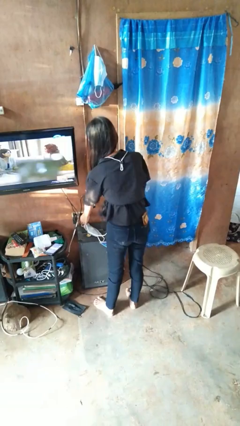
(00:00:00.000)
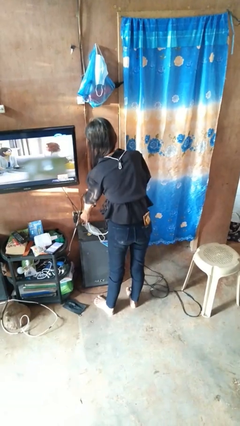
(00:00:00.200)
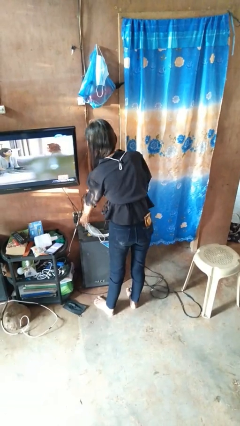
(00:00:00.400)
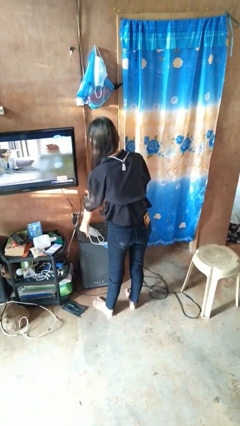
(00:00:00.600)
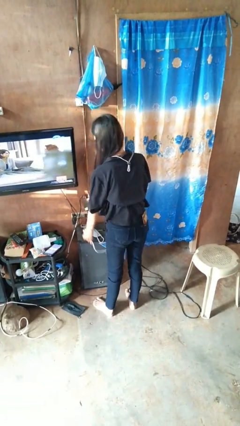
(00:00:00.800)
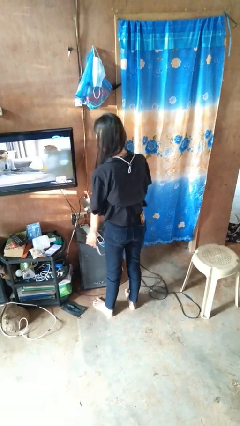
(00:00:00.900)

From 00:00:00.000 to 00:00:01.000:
person unplugs from electrical socket

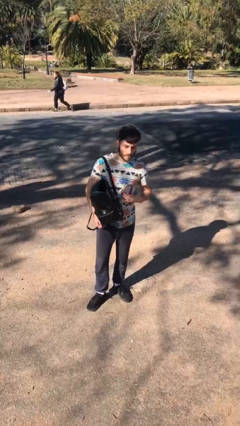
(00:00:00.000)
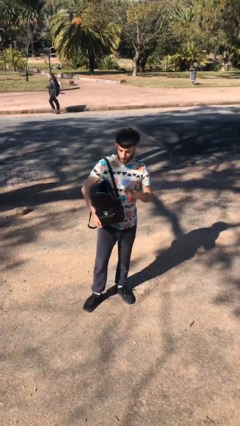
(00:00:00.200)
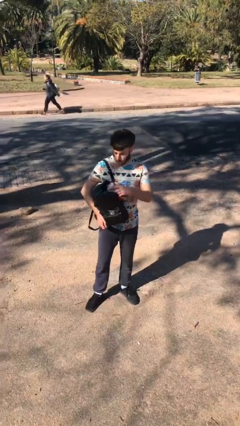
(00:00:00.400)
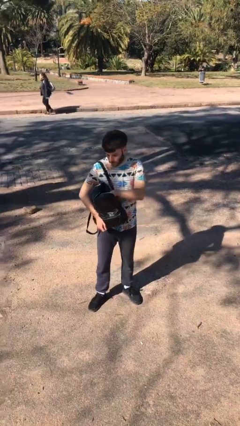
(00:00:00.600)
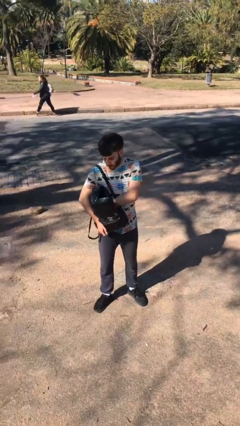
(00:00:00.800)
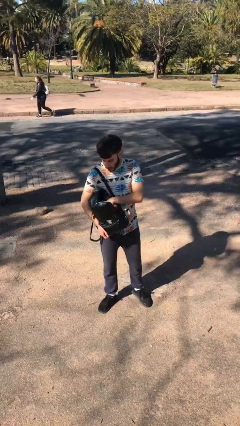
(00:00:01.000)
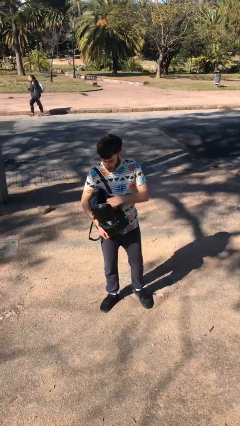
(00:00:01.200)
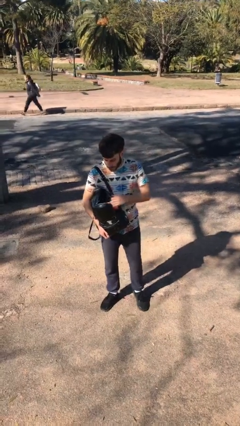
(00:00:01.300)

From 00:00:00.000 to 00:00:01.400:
person puts object into backpack

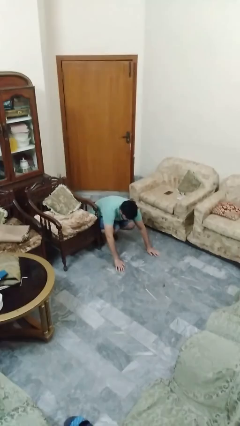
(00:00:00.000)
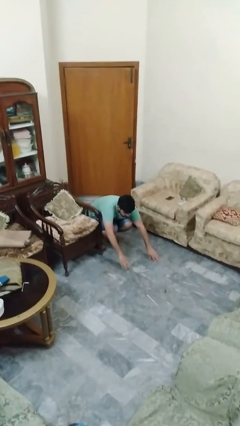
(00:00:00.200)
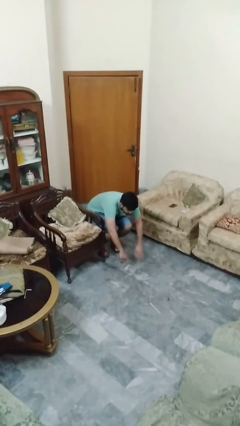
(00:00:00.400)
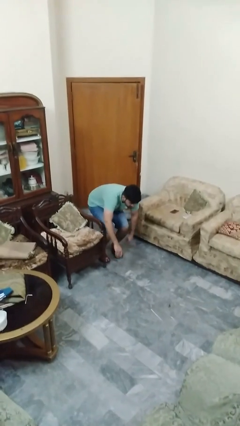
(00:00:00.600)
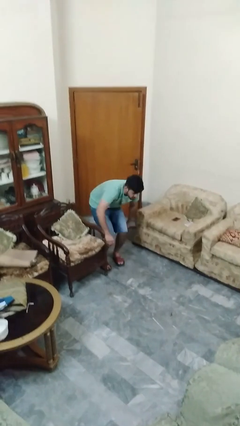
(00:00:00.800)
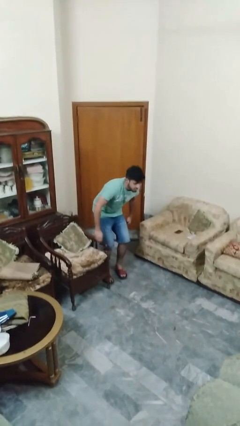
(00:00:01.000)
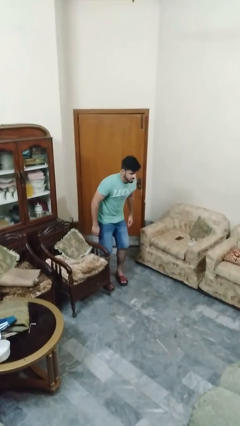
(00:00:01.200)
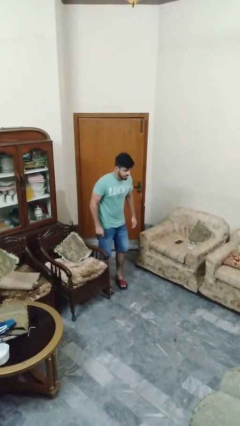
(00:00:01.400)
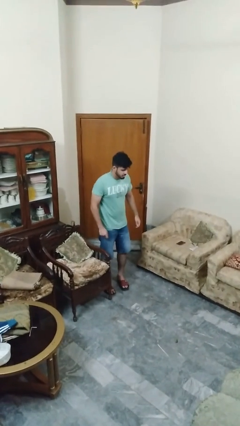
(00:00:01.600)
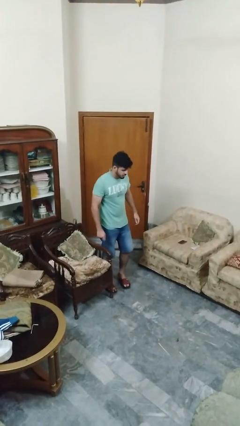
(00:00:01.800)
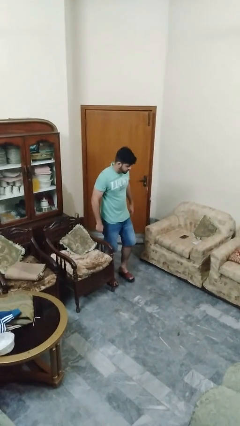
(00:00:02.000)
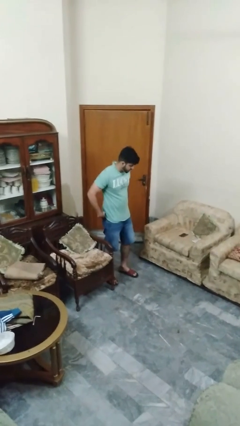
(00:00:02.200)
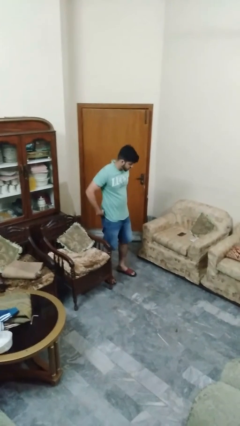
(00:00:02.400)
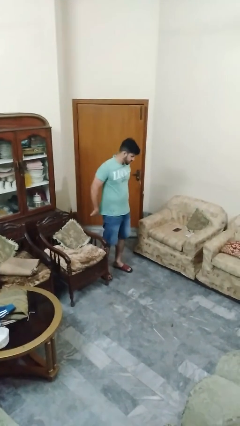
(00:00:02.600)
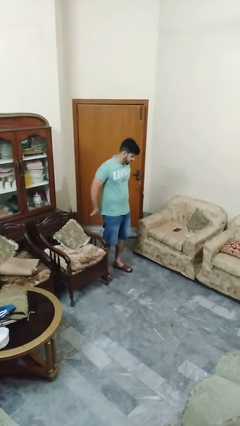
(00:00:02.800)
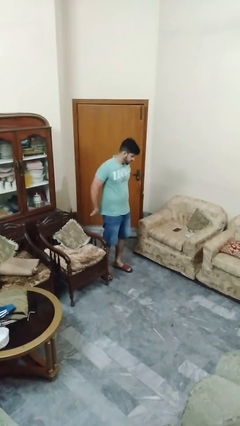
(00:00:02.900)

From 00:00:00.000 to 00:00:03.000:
person stands up from floor

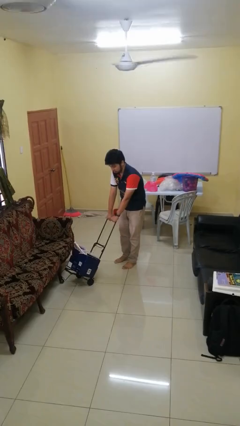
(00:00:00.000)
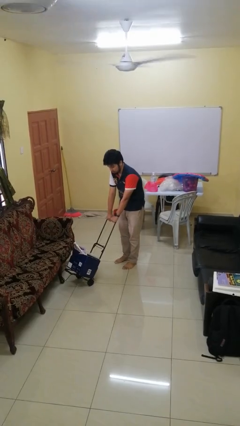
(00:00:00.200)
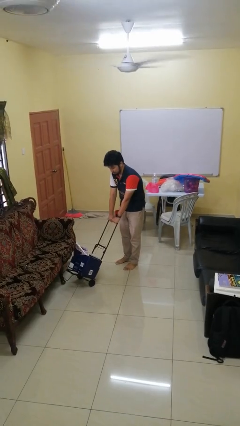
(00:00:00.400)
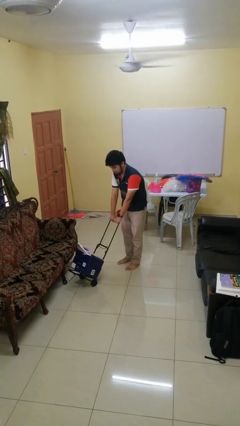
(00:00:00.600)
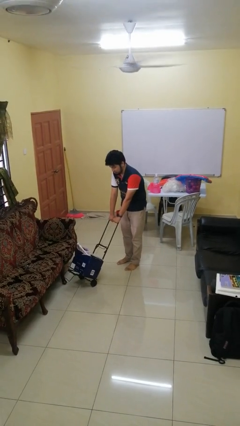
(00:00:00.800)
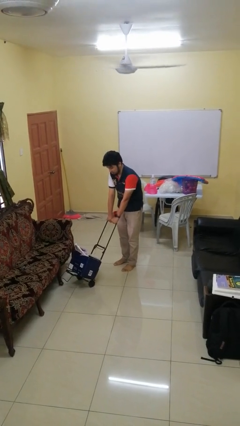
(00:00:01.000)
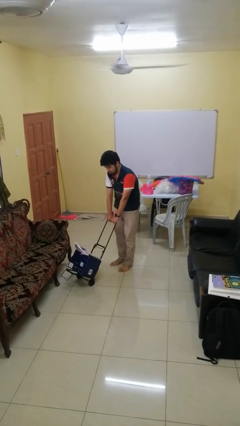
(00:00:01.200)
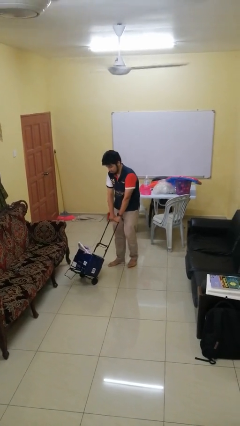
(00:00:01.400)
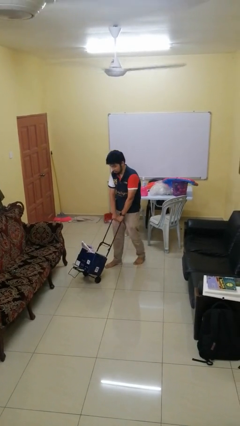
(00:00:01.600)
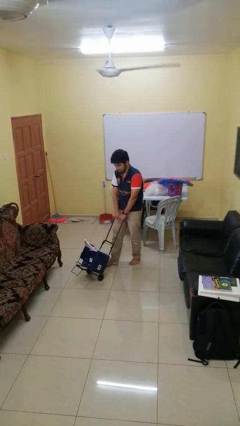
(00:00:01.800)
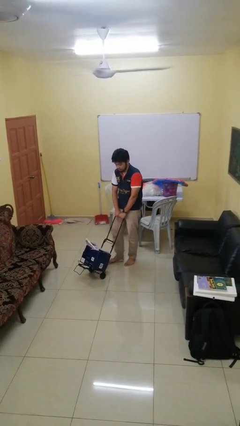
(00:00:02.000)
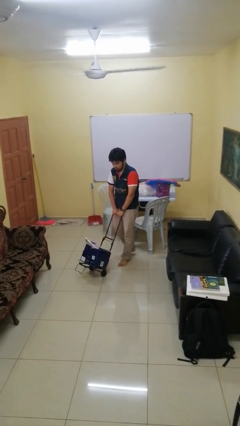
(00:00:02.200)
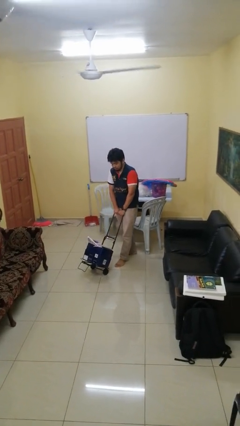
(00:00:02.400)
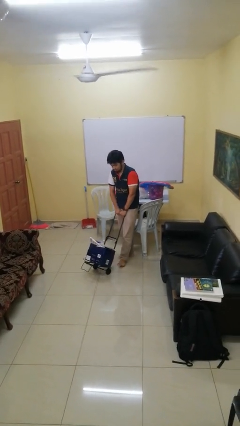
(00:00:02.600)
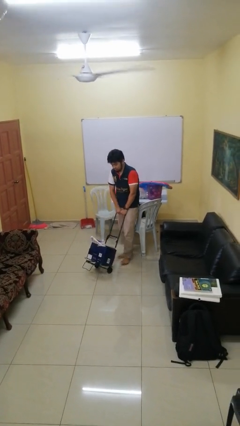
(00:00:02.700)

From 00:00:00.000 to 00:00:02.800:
person pulls wheeled cart

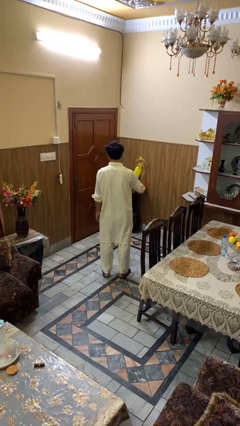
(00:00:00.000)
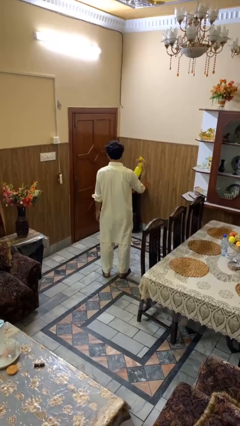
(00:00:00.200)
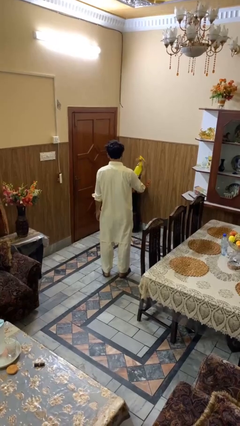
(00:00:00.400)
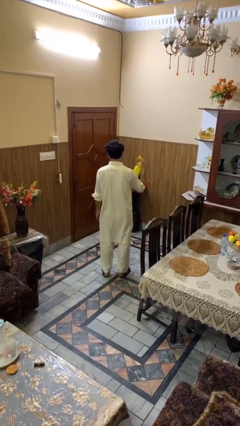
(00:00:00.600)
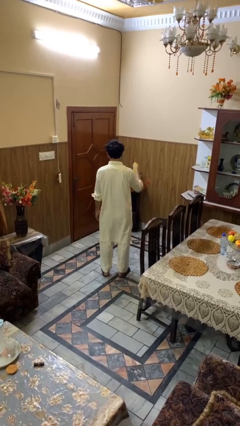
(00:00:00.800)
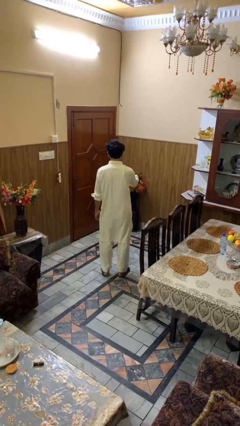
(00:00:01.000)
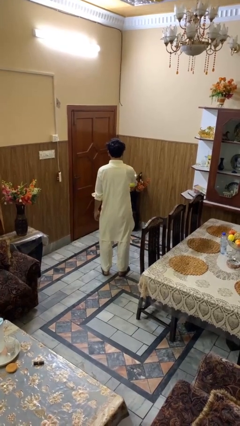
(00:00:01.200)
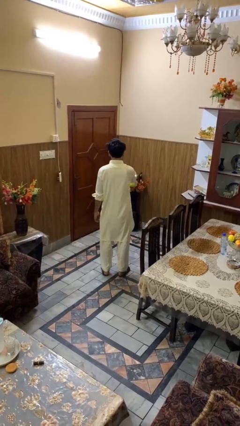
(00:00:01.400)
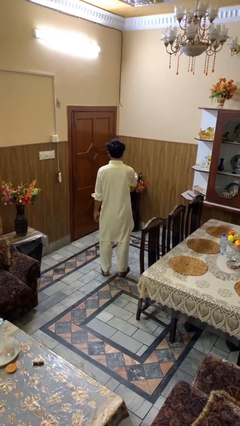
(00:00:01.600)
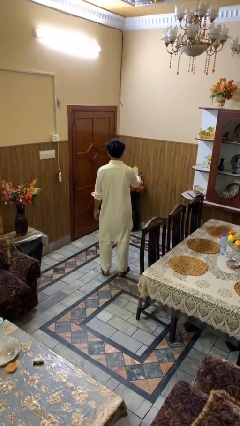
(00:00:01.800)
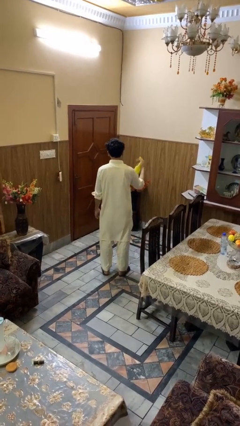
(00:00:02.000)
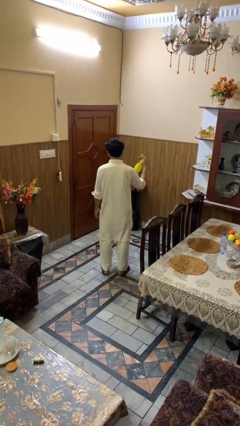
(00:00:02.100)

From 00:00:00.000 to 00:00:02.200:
person sprays from bottle

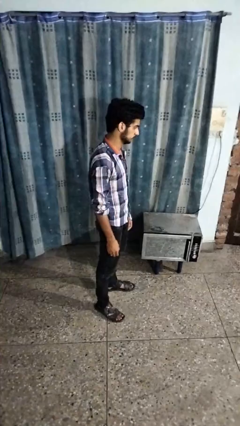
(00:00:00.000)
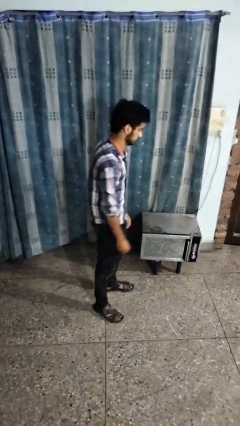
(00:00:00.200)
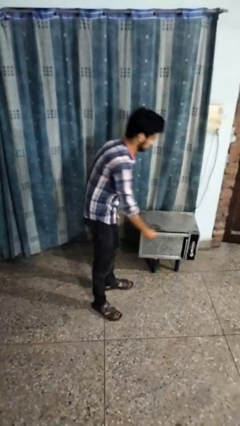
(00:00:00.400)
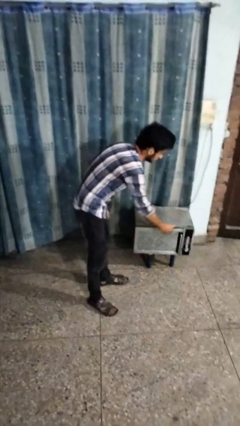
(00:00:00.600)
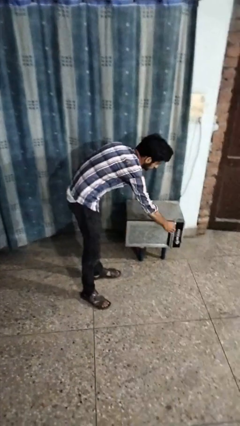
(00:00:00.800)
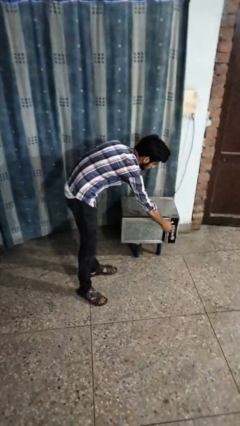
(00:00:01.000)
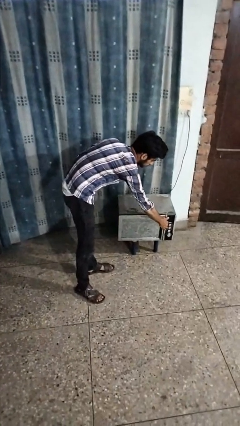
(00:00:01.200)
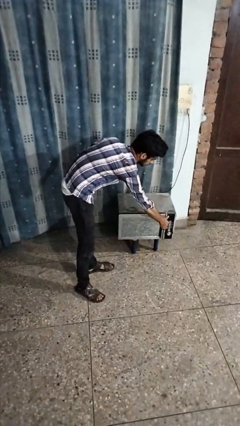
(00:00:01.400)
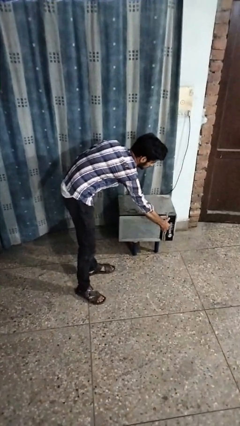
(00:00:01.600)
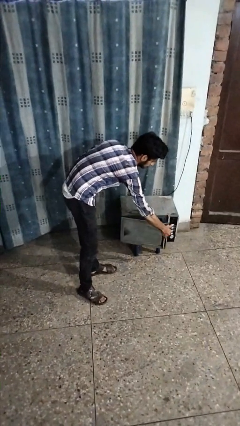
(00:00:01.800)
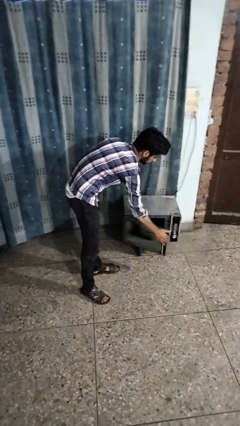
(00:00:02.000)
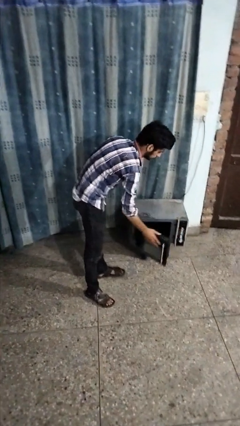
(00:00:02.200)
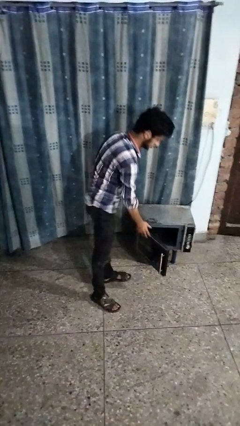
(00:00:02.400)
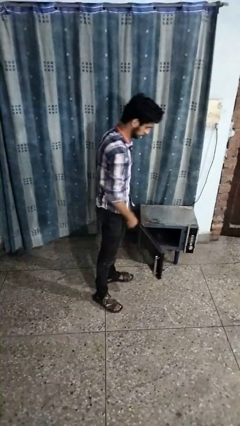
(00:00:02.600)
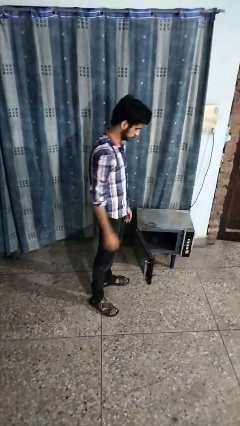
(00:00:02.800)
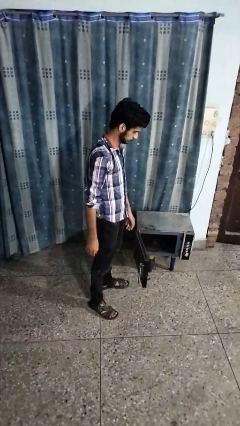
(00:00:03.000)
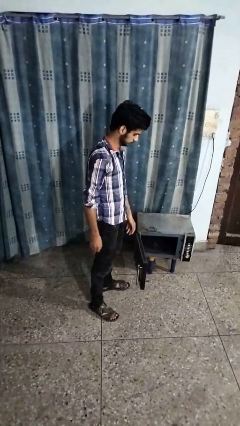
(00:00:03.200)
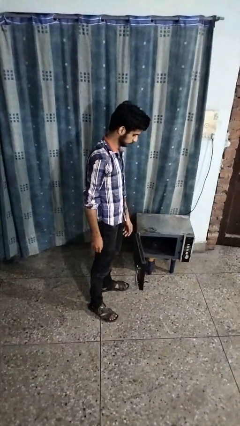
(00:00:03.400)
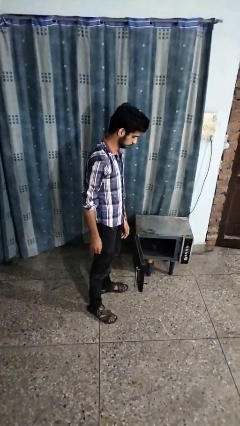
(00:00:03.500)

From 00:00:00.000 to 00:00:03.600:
person opens oven door

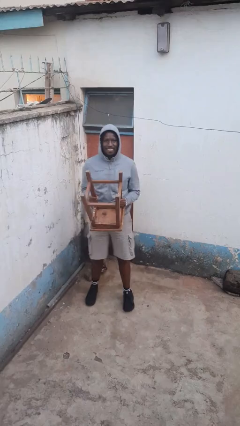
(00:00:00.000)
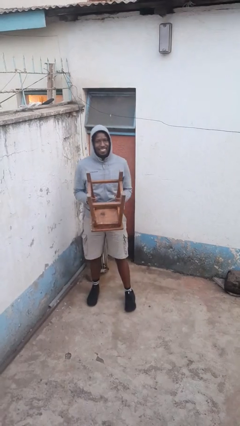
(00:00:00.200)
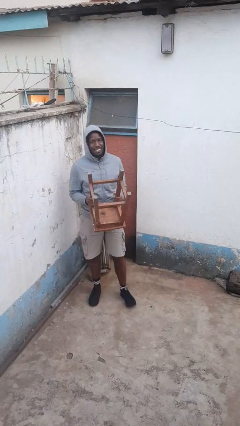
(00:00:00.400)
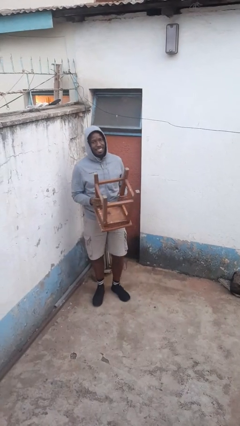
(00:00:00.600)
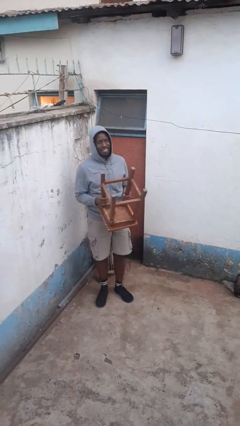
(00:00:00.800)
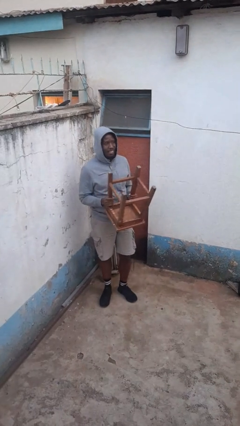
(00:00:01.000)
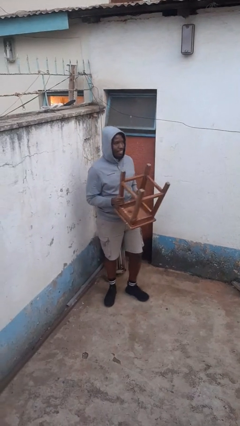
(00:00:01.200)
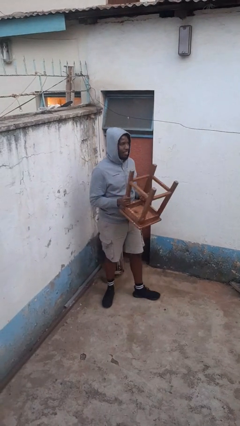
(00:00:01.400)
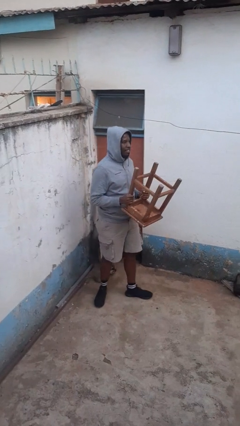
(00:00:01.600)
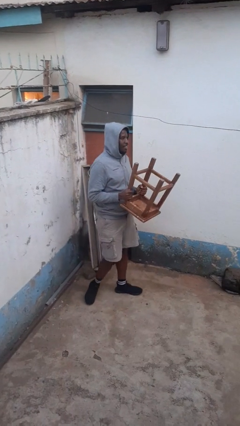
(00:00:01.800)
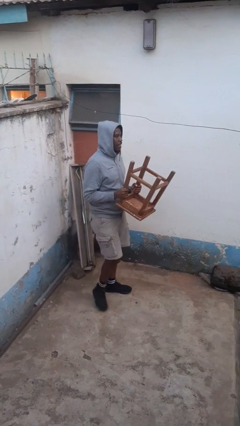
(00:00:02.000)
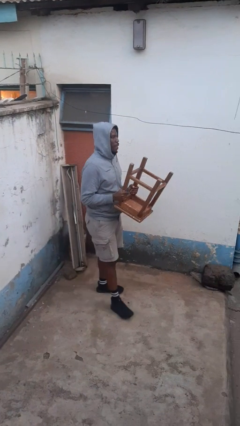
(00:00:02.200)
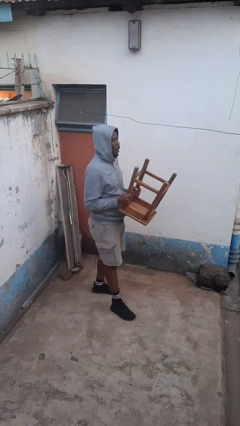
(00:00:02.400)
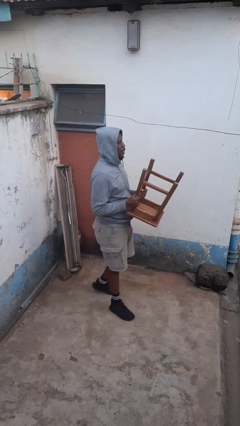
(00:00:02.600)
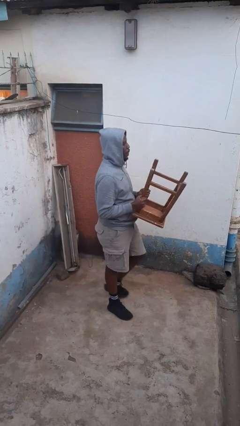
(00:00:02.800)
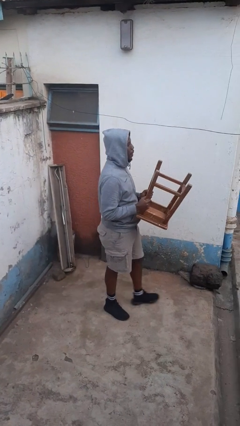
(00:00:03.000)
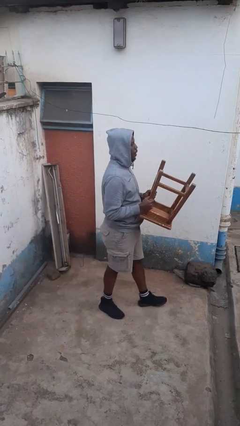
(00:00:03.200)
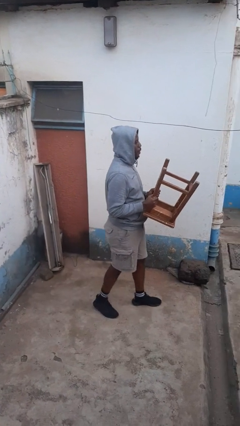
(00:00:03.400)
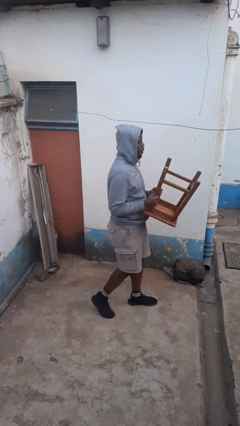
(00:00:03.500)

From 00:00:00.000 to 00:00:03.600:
person carries furniture
